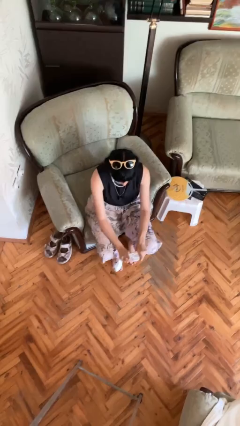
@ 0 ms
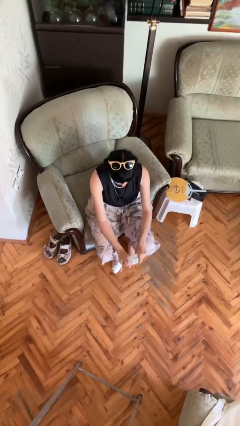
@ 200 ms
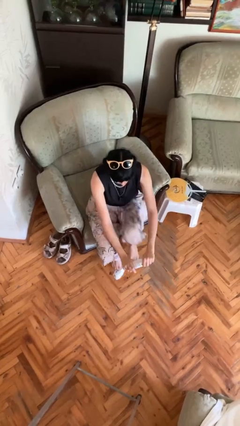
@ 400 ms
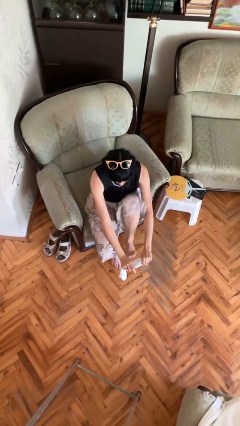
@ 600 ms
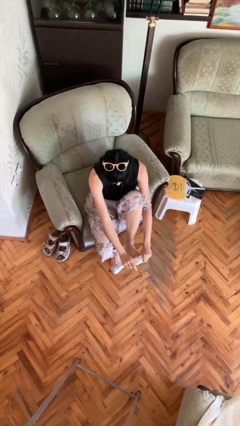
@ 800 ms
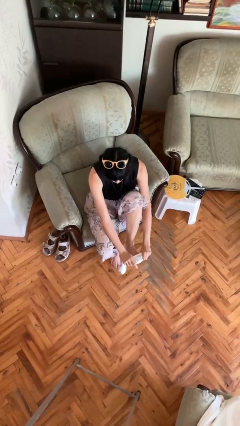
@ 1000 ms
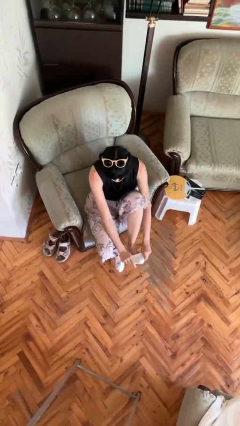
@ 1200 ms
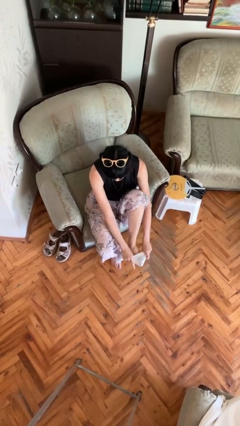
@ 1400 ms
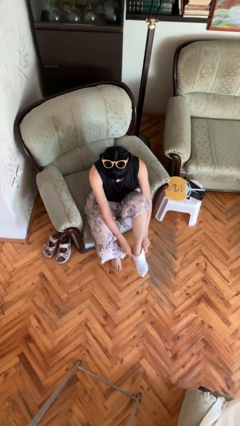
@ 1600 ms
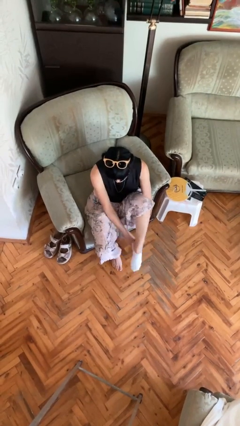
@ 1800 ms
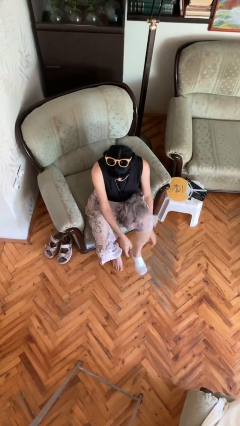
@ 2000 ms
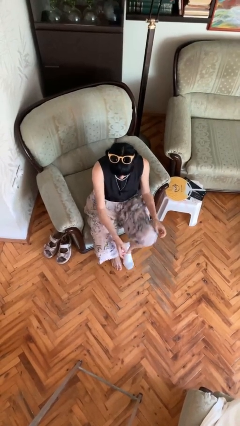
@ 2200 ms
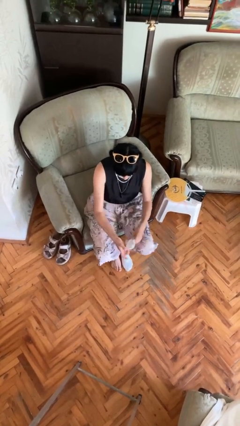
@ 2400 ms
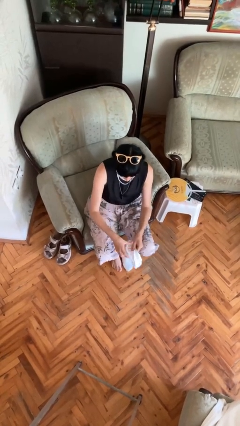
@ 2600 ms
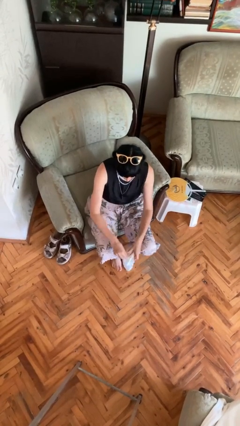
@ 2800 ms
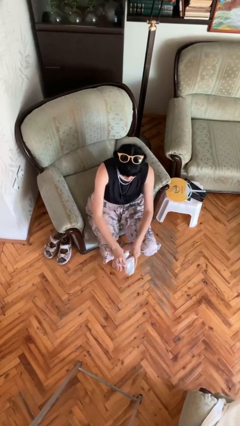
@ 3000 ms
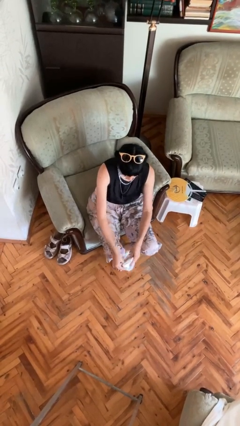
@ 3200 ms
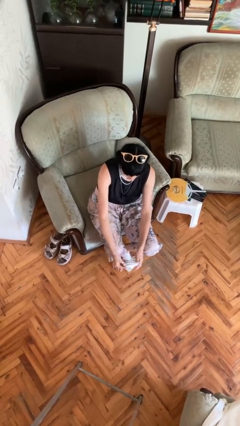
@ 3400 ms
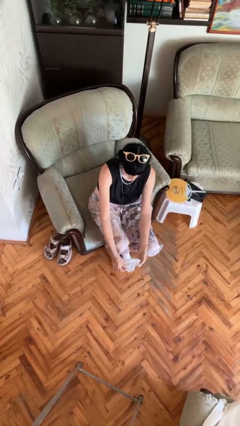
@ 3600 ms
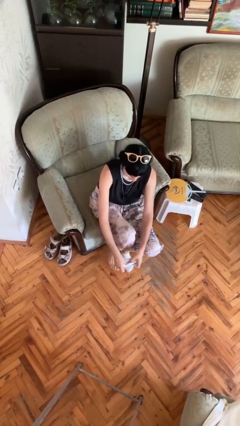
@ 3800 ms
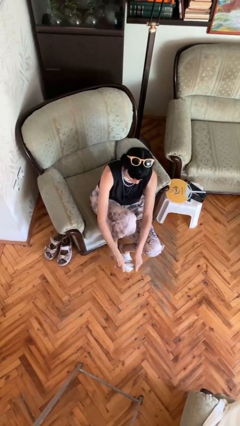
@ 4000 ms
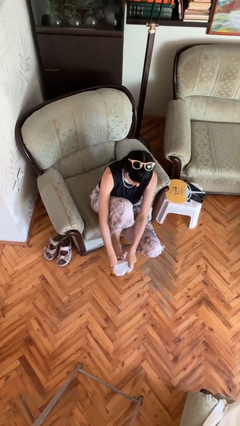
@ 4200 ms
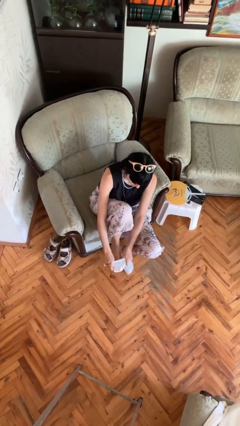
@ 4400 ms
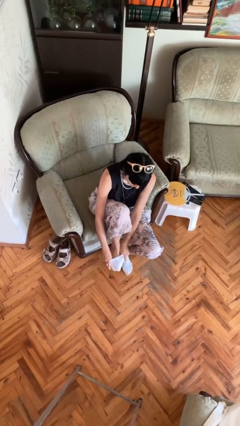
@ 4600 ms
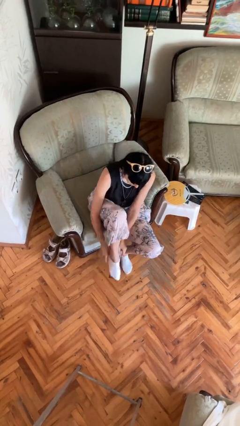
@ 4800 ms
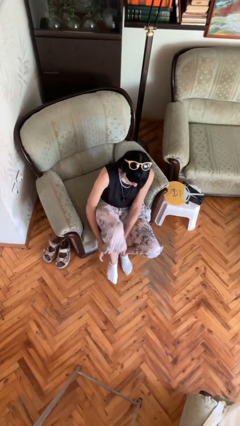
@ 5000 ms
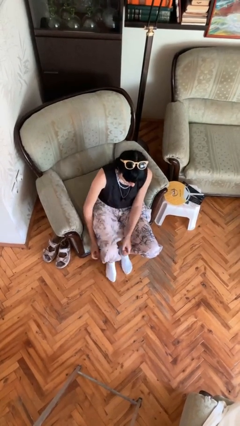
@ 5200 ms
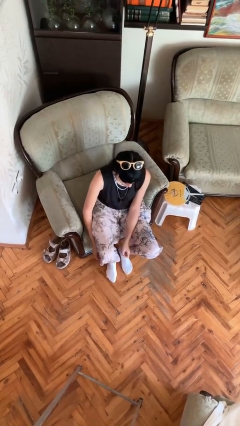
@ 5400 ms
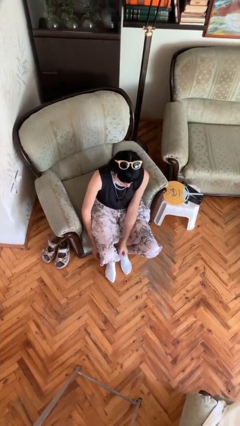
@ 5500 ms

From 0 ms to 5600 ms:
person puts on socks

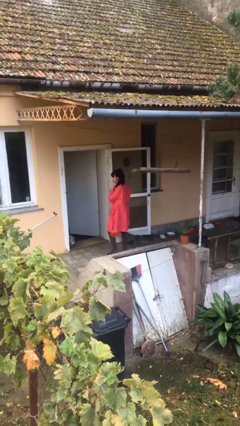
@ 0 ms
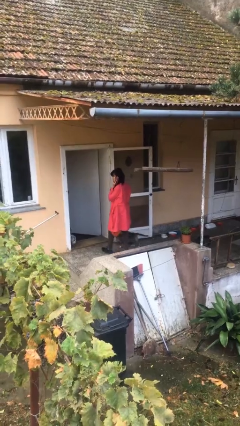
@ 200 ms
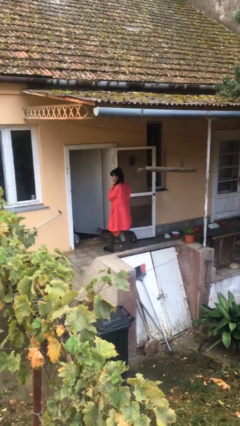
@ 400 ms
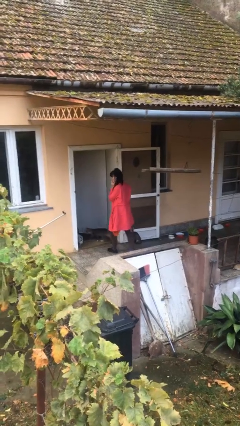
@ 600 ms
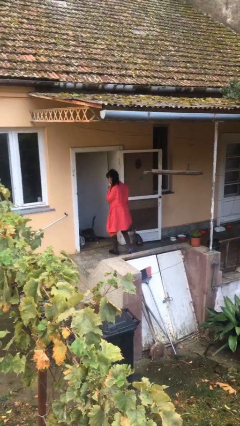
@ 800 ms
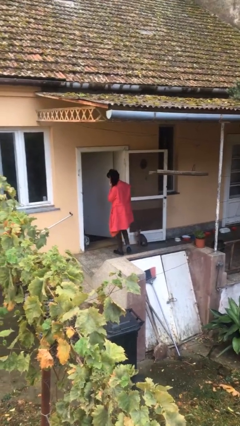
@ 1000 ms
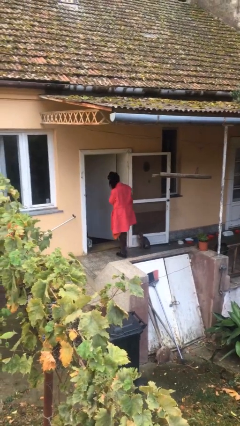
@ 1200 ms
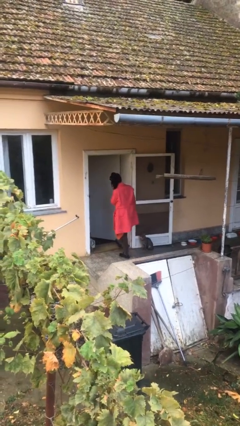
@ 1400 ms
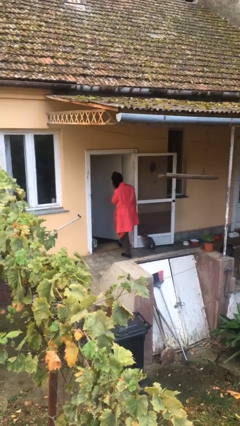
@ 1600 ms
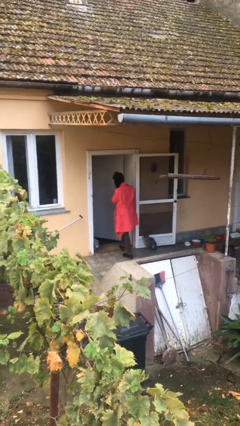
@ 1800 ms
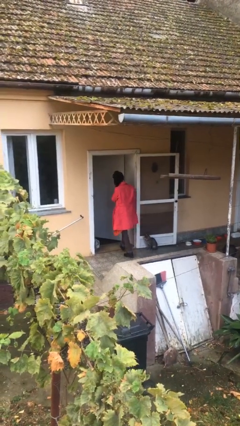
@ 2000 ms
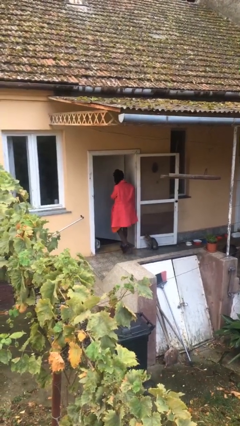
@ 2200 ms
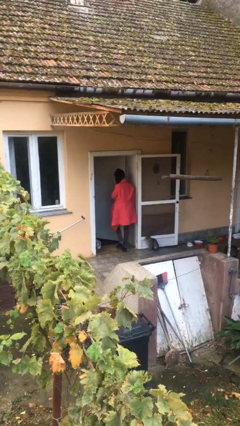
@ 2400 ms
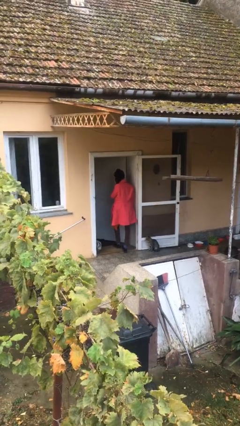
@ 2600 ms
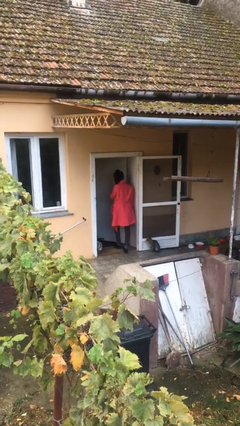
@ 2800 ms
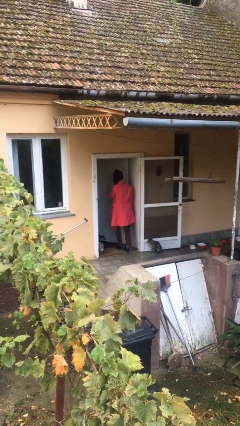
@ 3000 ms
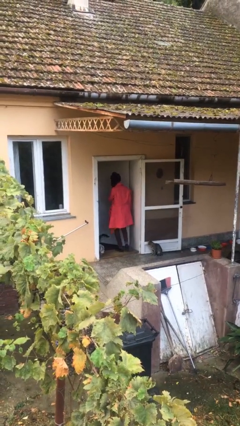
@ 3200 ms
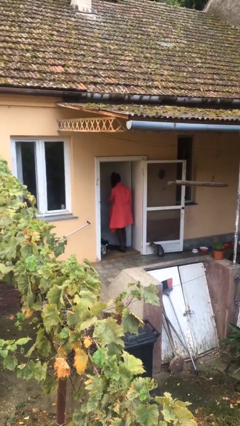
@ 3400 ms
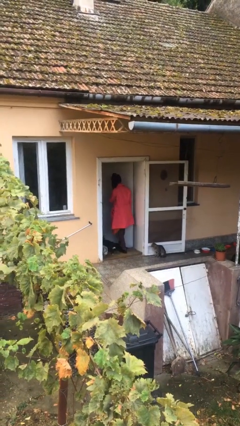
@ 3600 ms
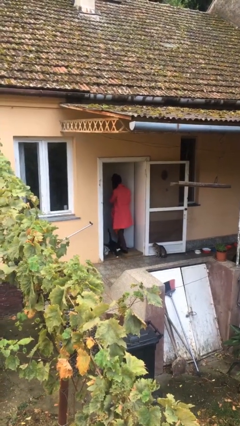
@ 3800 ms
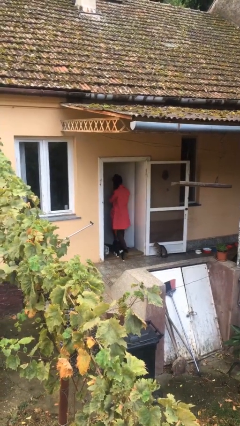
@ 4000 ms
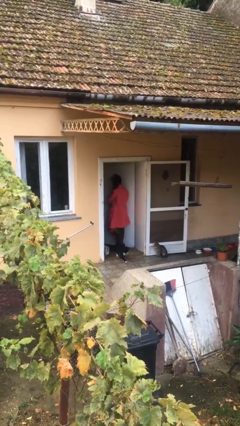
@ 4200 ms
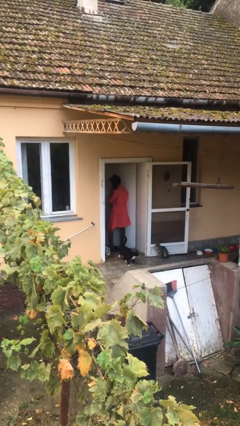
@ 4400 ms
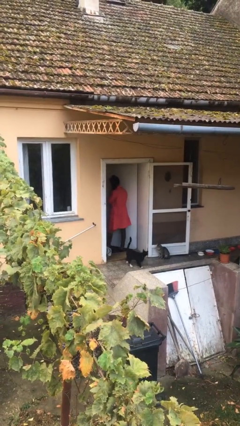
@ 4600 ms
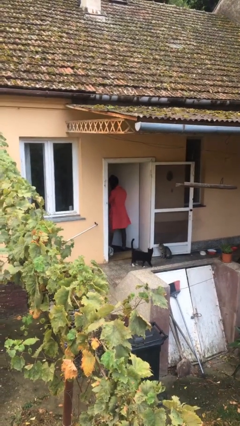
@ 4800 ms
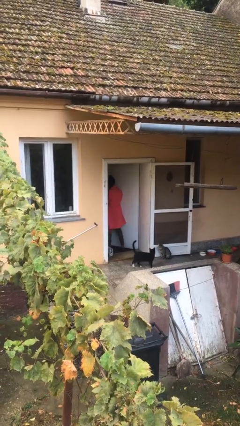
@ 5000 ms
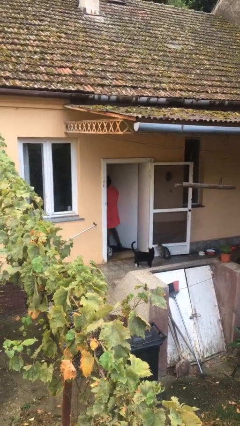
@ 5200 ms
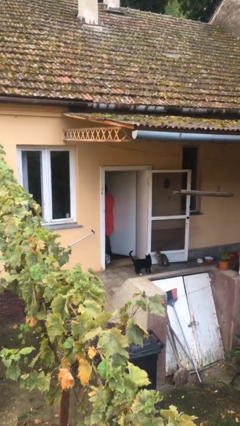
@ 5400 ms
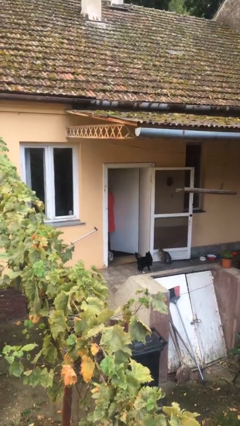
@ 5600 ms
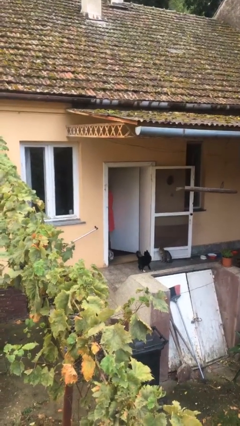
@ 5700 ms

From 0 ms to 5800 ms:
person exits scene through structure

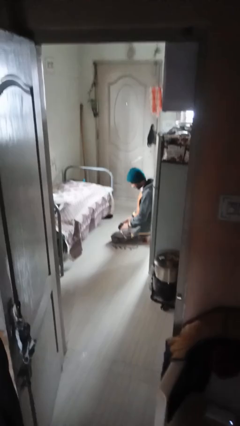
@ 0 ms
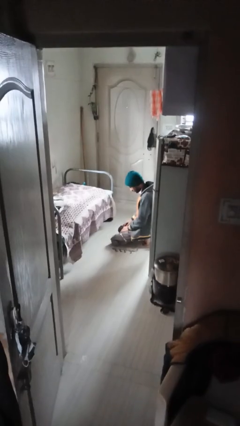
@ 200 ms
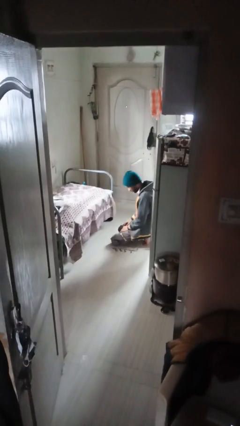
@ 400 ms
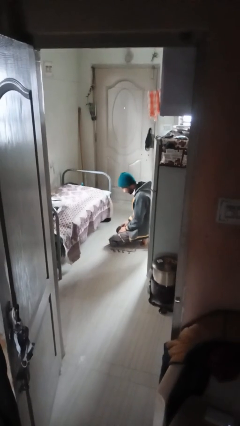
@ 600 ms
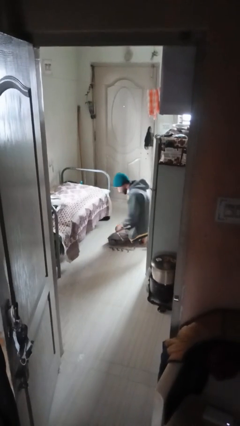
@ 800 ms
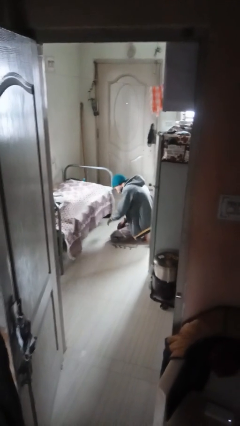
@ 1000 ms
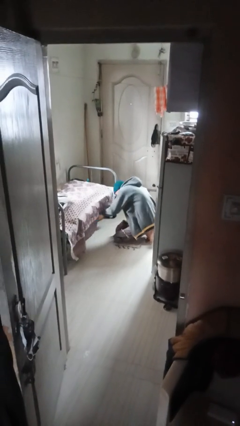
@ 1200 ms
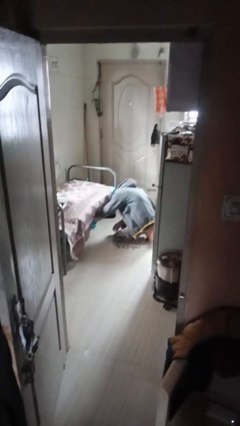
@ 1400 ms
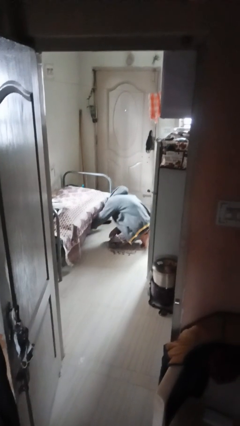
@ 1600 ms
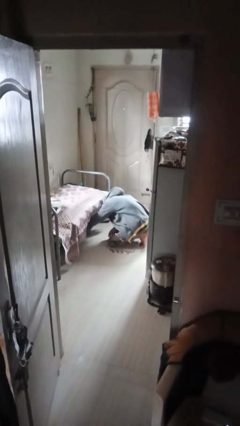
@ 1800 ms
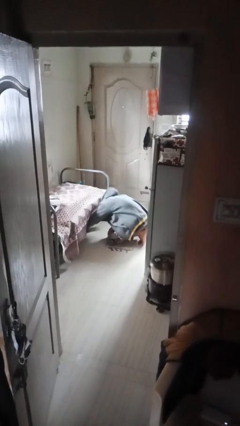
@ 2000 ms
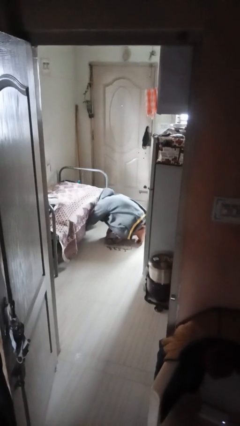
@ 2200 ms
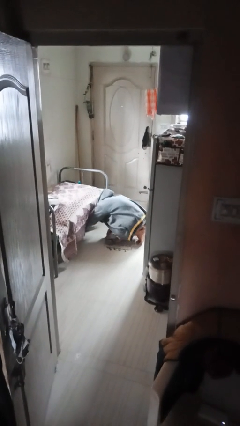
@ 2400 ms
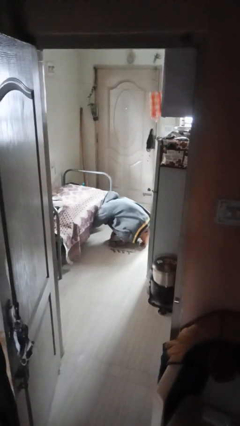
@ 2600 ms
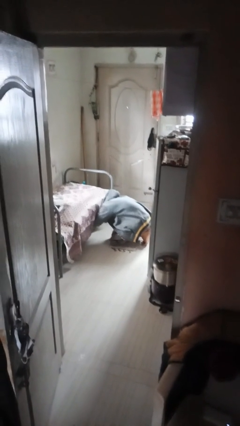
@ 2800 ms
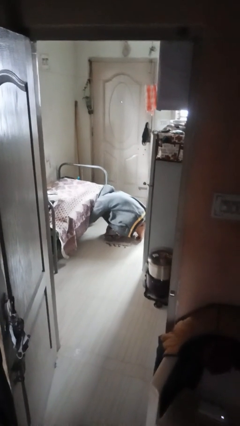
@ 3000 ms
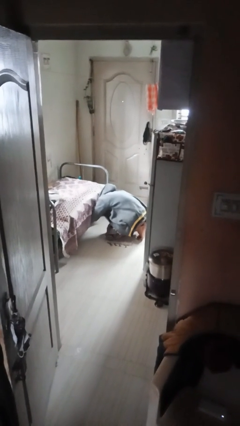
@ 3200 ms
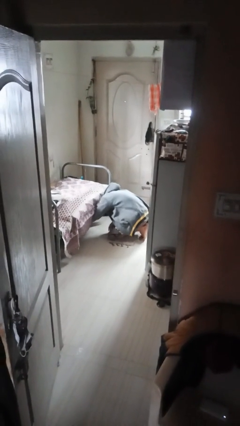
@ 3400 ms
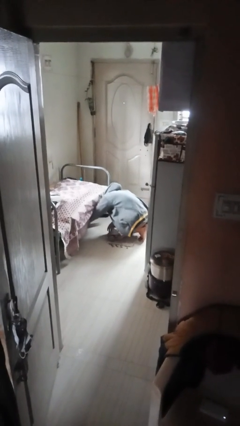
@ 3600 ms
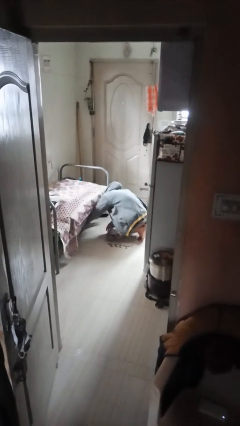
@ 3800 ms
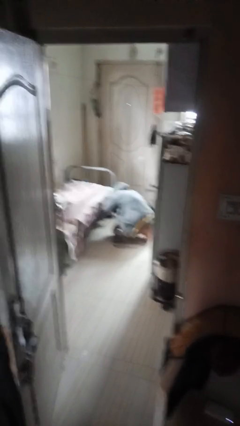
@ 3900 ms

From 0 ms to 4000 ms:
person searches under bed

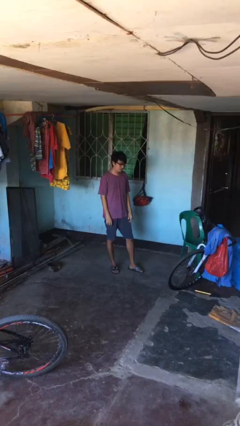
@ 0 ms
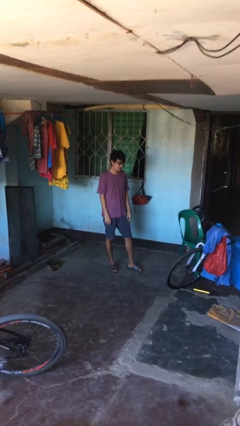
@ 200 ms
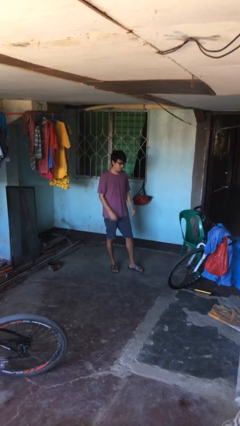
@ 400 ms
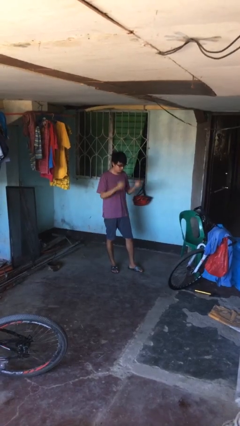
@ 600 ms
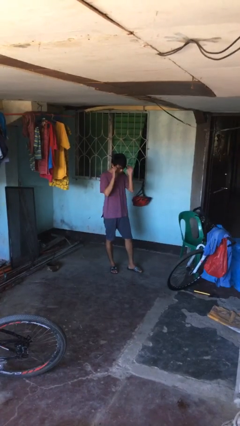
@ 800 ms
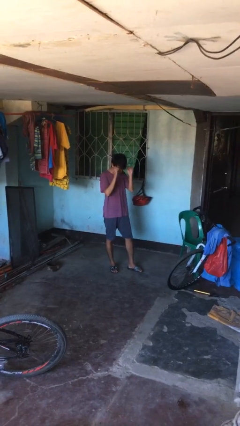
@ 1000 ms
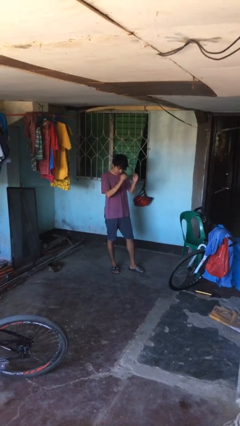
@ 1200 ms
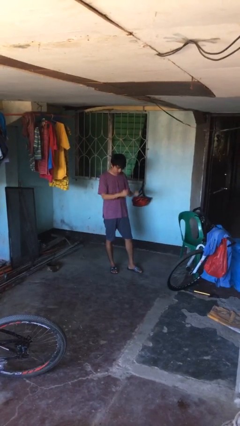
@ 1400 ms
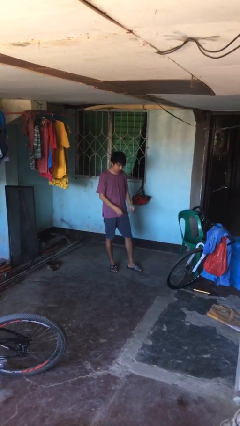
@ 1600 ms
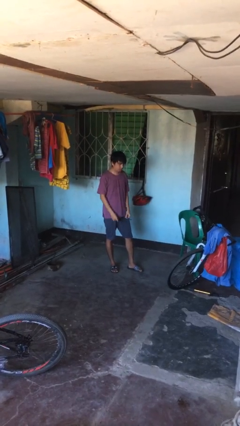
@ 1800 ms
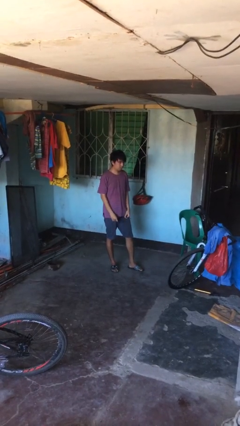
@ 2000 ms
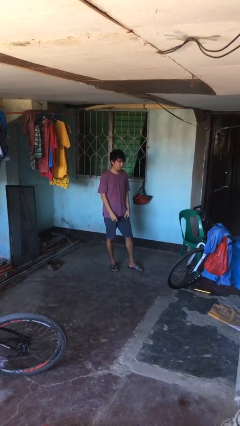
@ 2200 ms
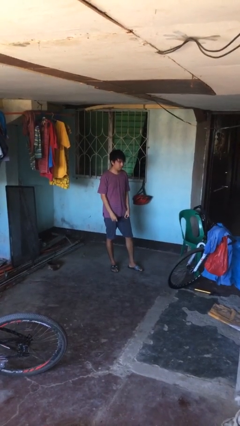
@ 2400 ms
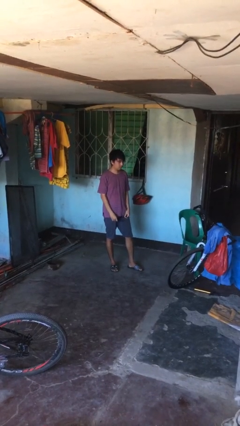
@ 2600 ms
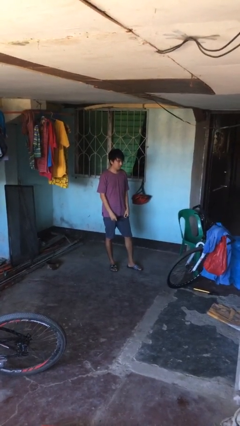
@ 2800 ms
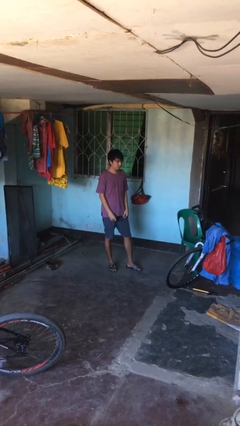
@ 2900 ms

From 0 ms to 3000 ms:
person takes off glasses
